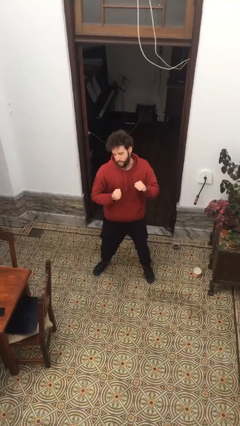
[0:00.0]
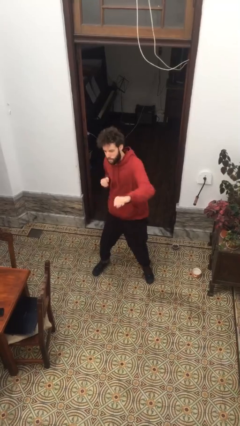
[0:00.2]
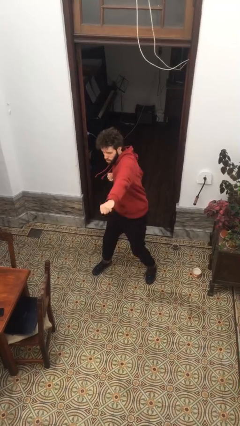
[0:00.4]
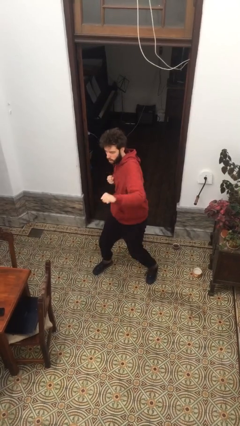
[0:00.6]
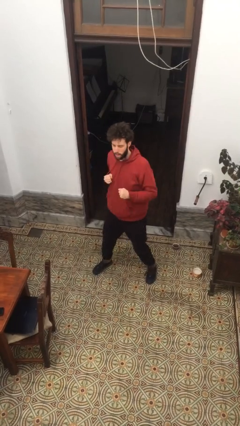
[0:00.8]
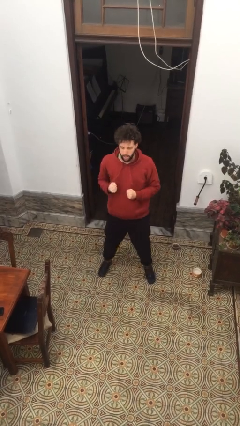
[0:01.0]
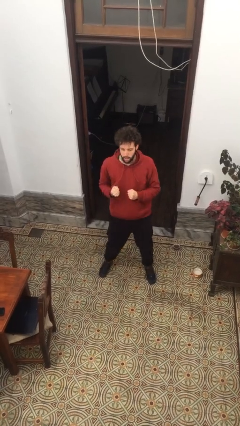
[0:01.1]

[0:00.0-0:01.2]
person punches

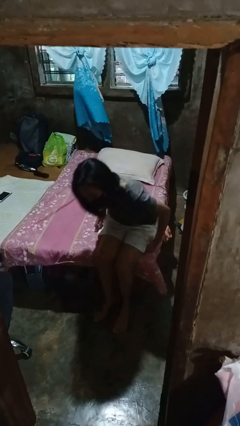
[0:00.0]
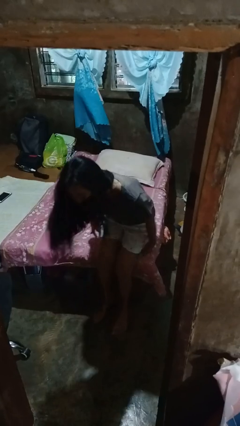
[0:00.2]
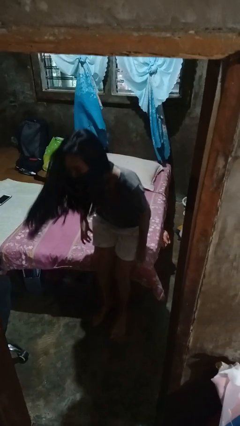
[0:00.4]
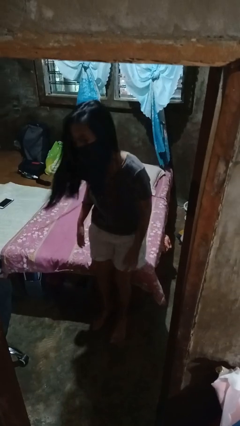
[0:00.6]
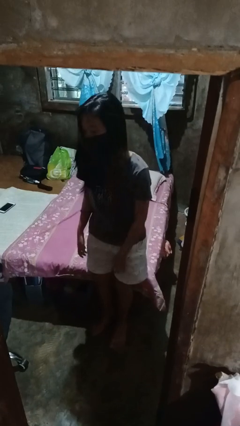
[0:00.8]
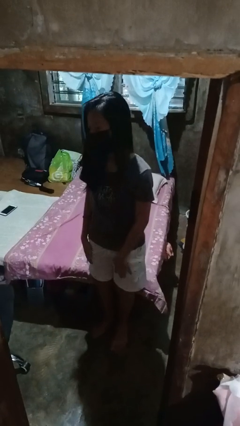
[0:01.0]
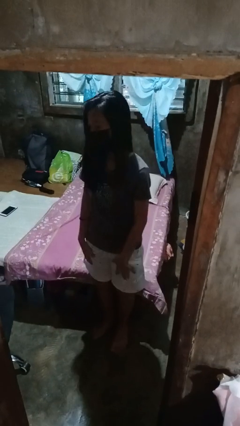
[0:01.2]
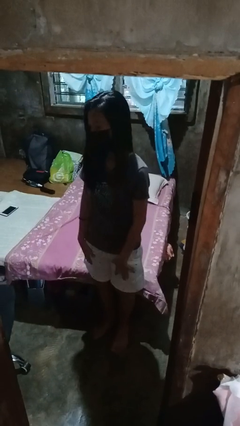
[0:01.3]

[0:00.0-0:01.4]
person stands up

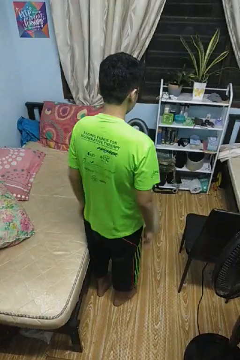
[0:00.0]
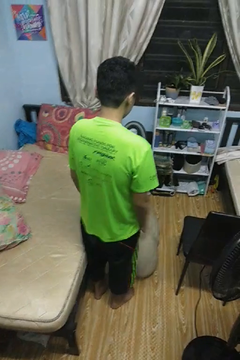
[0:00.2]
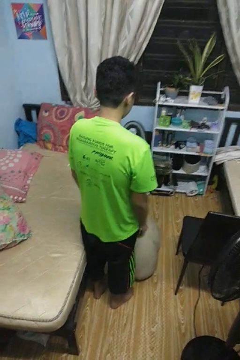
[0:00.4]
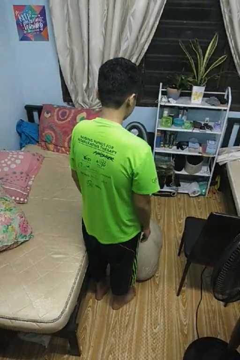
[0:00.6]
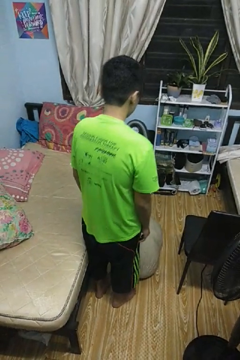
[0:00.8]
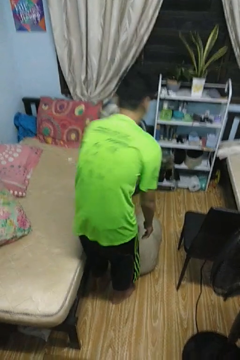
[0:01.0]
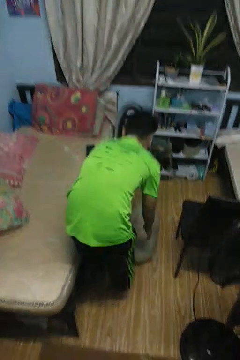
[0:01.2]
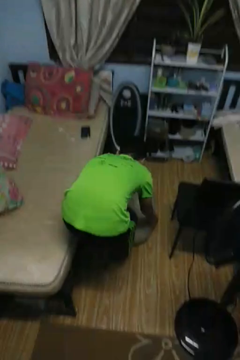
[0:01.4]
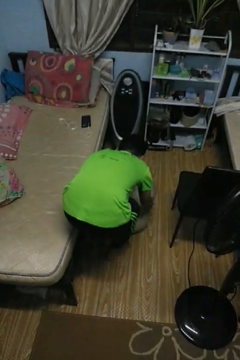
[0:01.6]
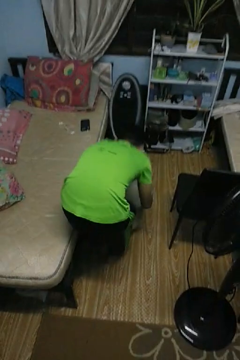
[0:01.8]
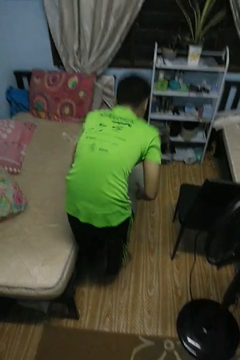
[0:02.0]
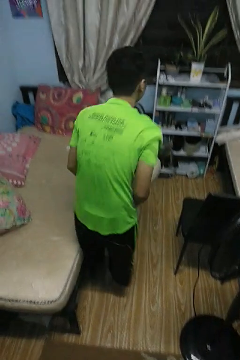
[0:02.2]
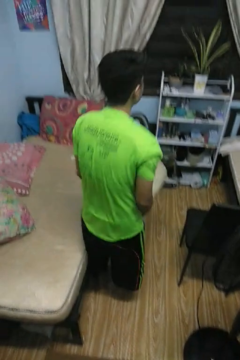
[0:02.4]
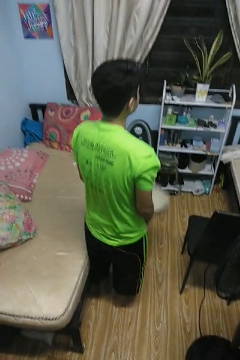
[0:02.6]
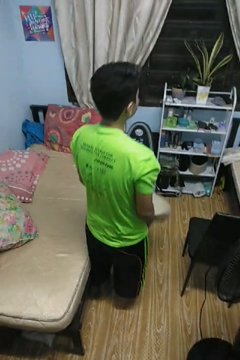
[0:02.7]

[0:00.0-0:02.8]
person picks up object from floor

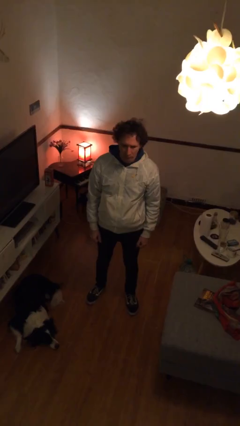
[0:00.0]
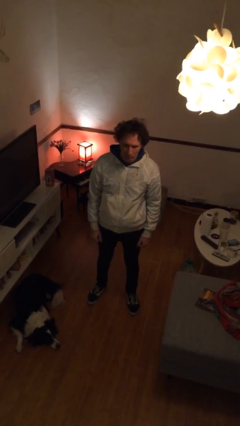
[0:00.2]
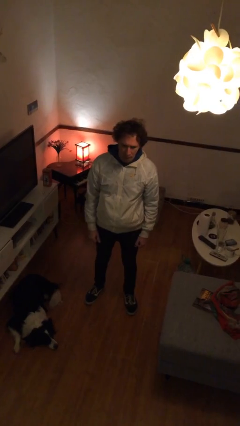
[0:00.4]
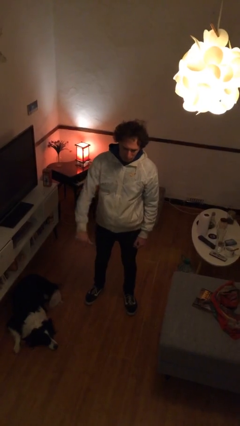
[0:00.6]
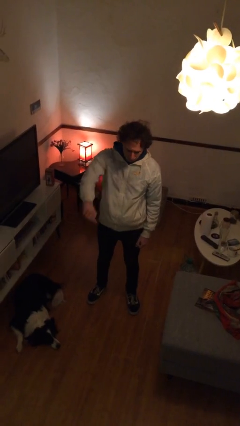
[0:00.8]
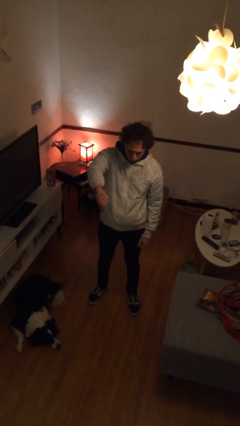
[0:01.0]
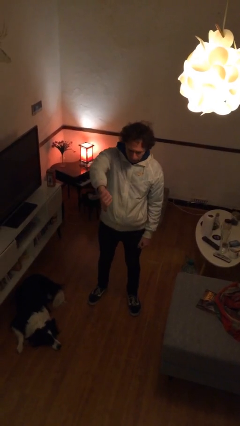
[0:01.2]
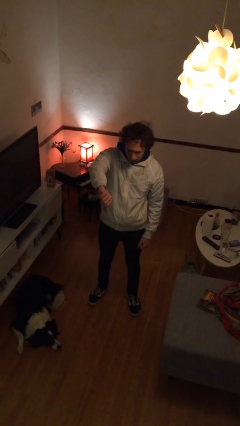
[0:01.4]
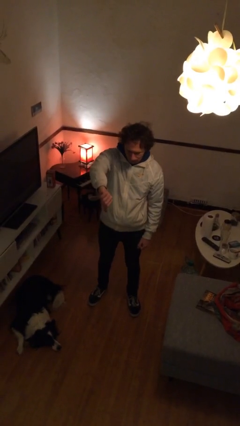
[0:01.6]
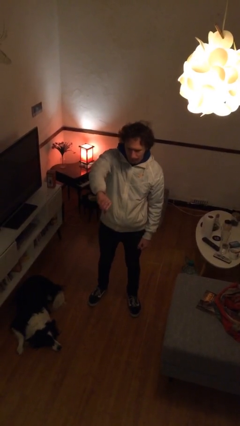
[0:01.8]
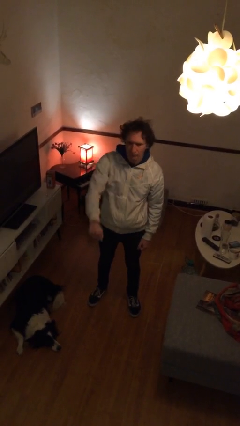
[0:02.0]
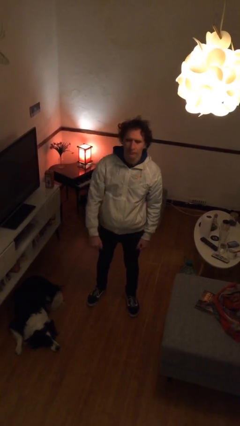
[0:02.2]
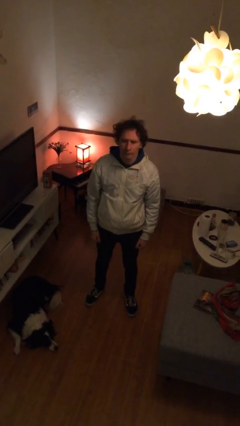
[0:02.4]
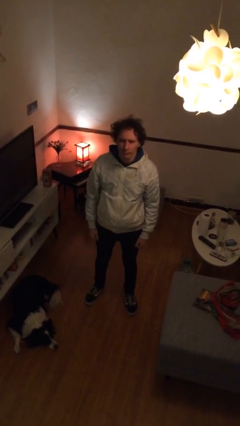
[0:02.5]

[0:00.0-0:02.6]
person gestures thumbs down

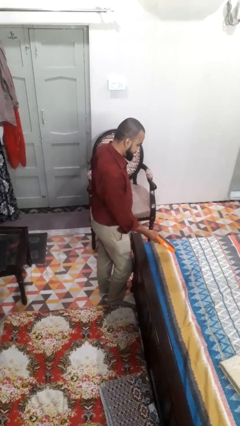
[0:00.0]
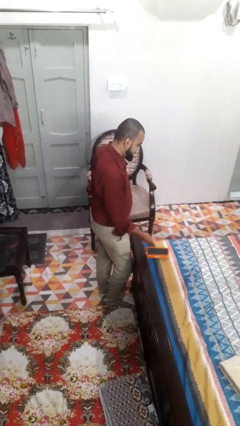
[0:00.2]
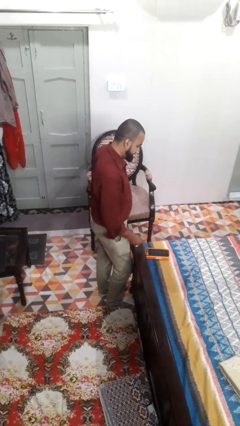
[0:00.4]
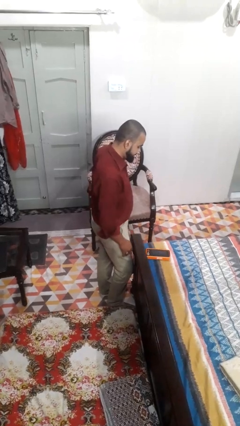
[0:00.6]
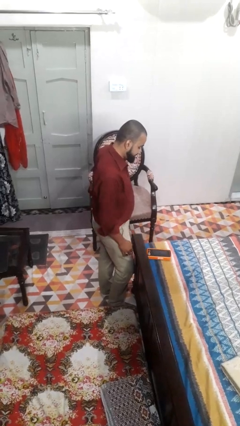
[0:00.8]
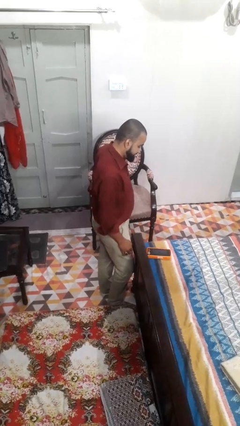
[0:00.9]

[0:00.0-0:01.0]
person puts down object on bed

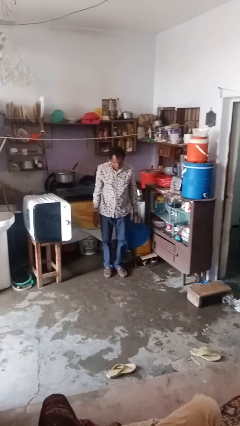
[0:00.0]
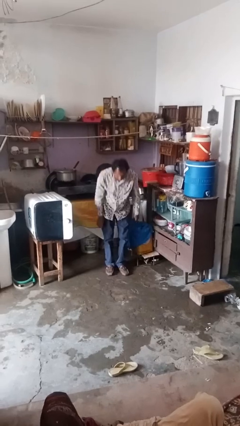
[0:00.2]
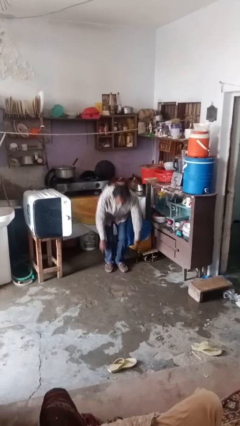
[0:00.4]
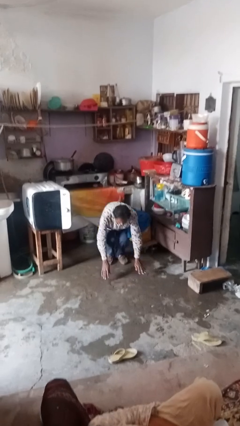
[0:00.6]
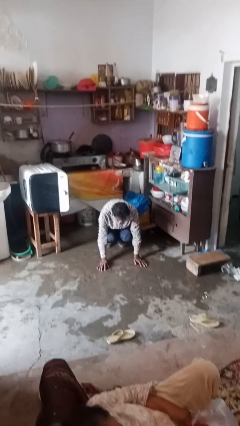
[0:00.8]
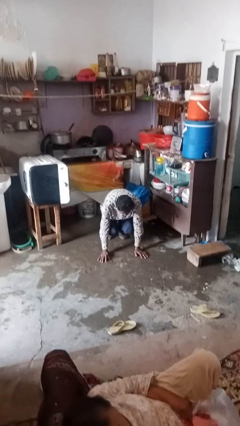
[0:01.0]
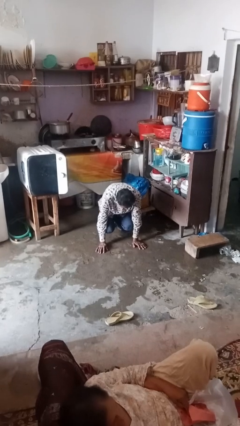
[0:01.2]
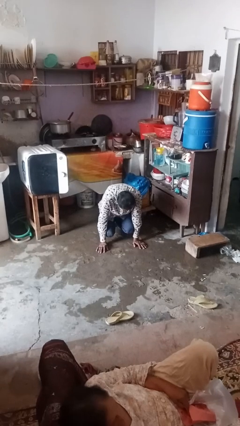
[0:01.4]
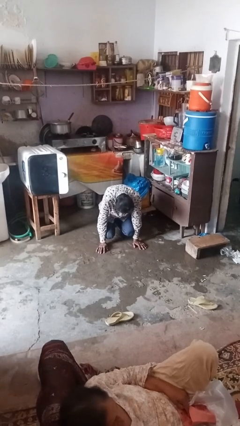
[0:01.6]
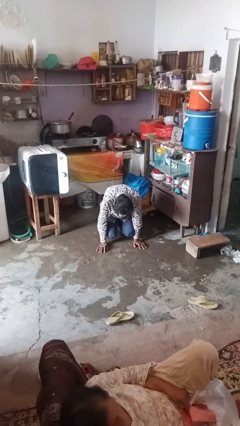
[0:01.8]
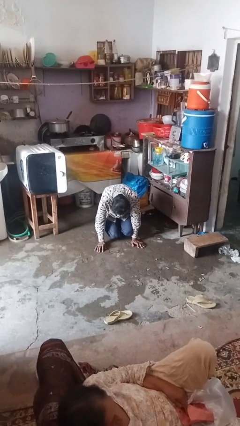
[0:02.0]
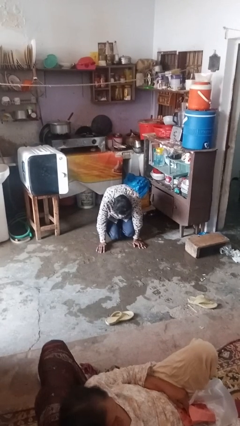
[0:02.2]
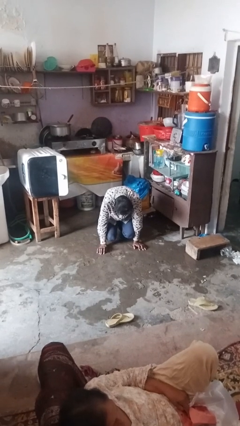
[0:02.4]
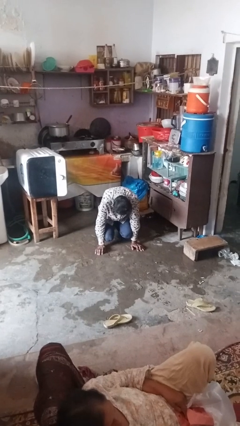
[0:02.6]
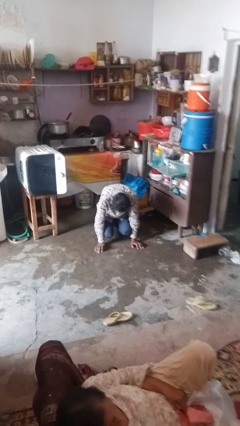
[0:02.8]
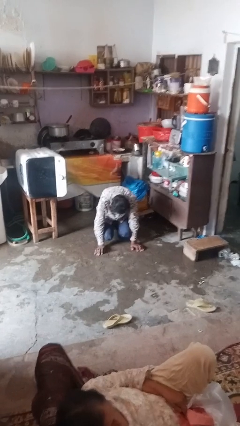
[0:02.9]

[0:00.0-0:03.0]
person falls while standing

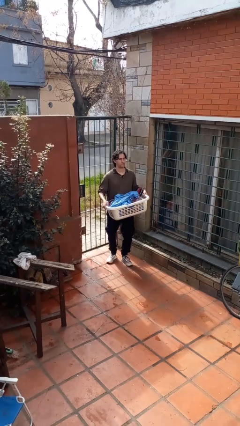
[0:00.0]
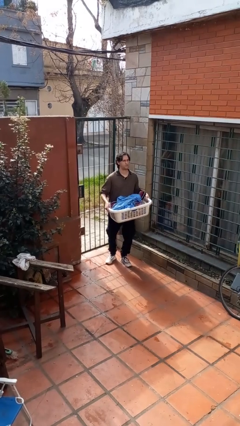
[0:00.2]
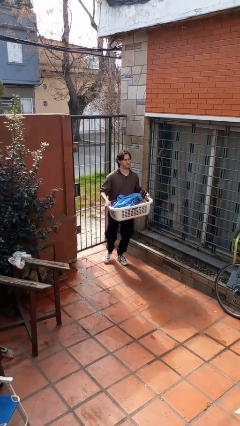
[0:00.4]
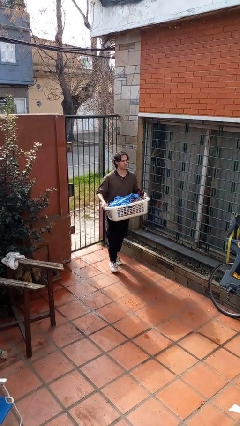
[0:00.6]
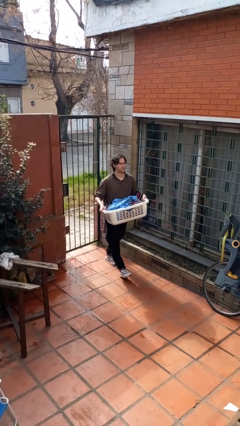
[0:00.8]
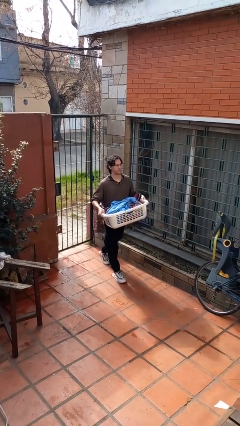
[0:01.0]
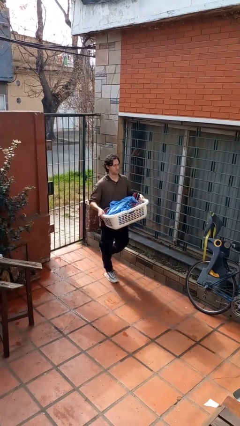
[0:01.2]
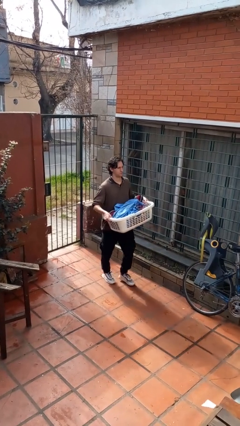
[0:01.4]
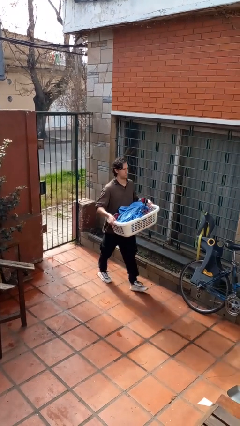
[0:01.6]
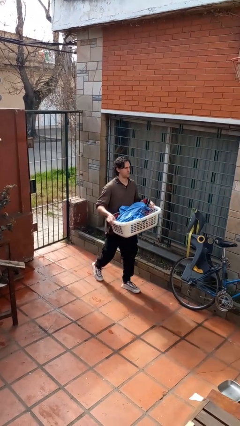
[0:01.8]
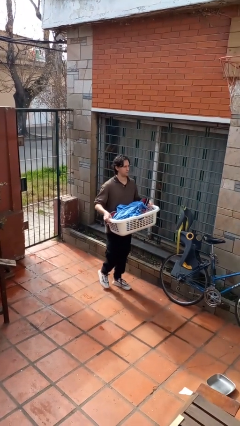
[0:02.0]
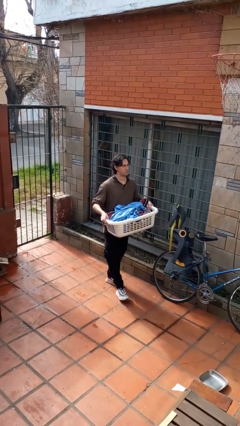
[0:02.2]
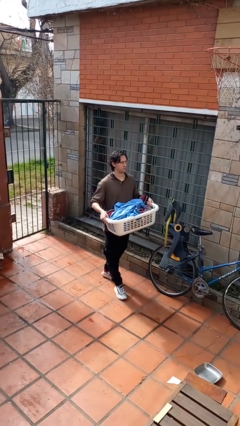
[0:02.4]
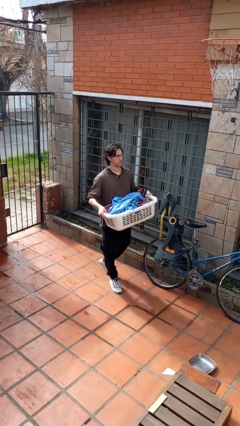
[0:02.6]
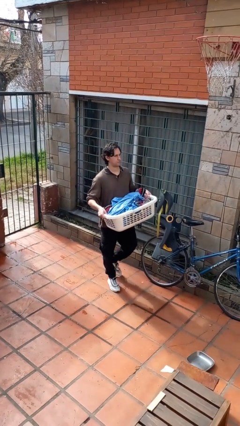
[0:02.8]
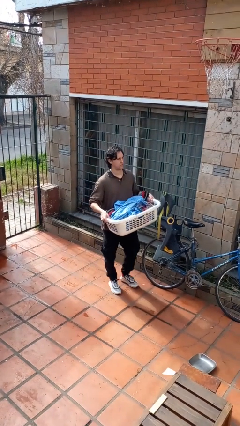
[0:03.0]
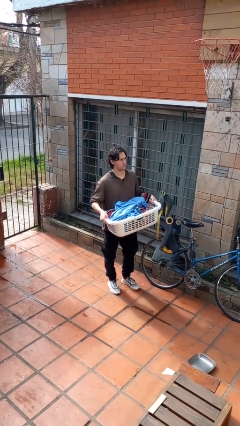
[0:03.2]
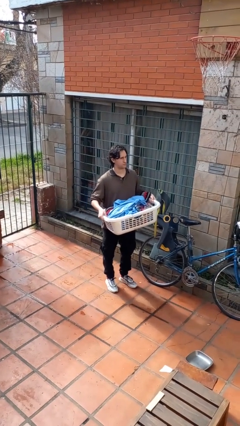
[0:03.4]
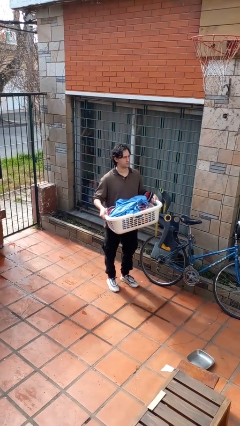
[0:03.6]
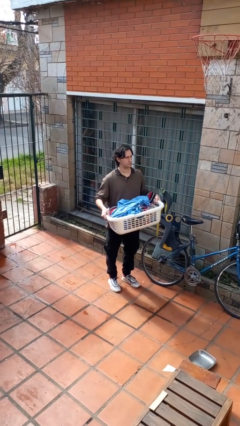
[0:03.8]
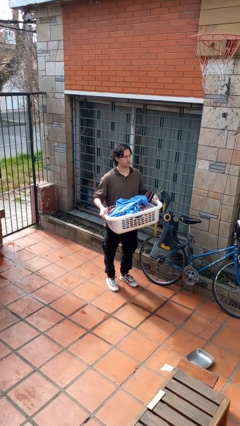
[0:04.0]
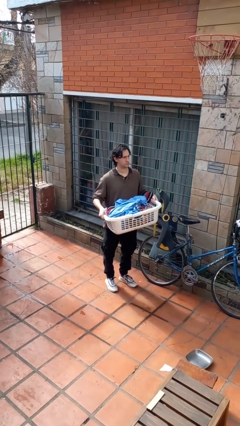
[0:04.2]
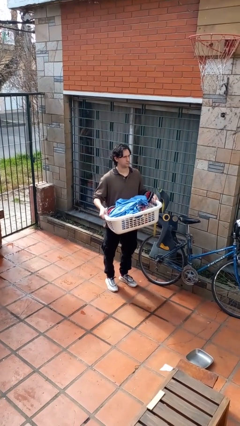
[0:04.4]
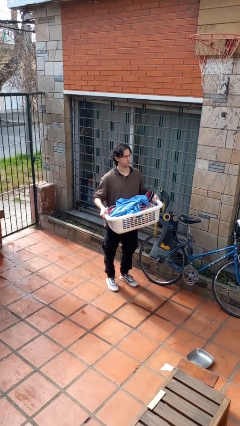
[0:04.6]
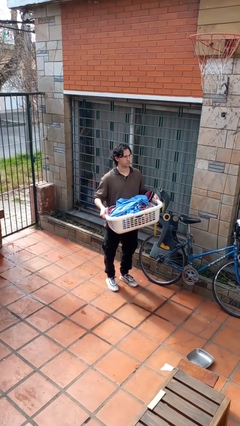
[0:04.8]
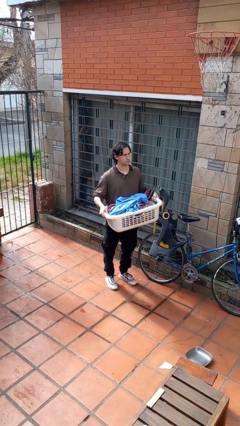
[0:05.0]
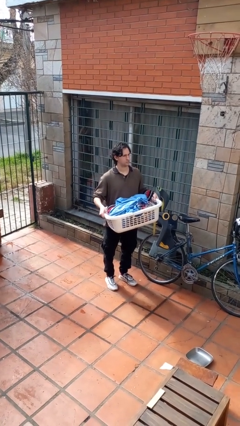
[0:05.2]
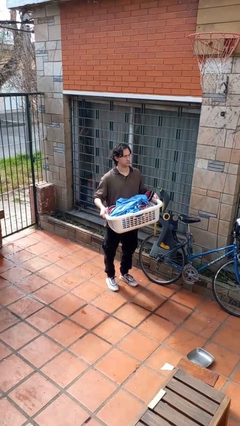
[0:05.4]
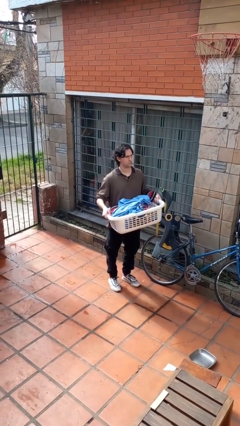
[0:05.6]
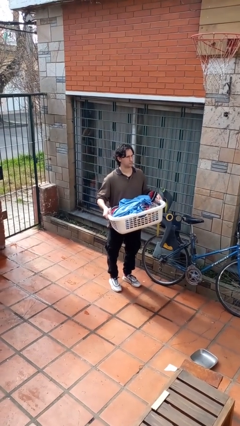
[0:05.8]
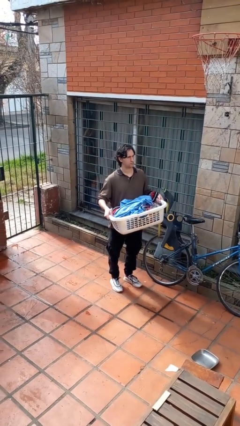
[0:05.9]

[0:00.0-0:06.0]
person carries laundry basket
